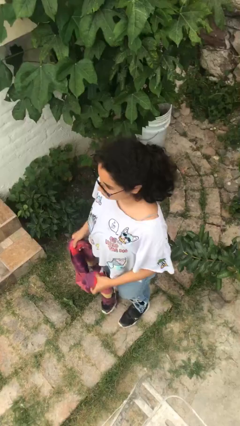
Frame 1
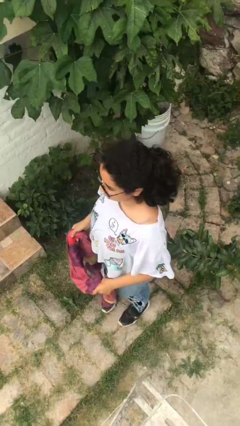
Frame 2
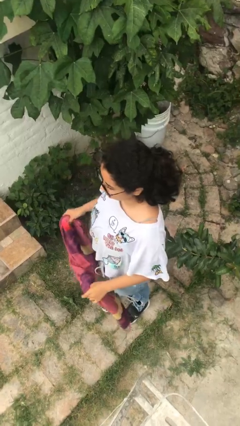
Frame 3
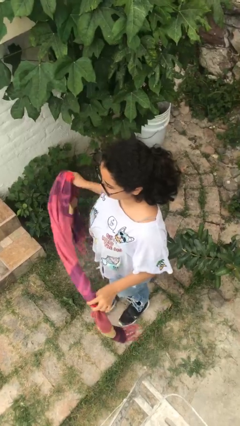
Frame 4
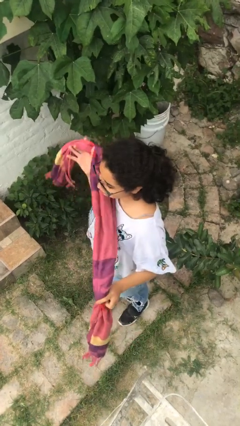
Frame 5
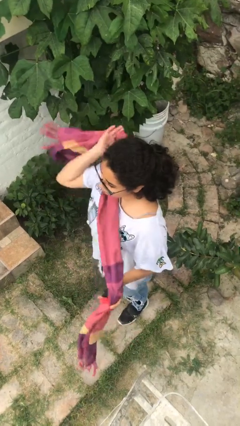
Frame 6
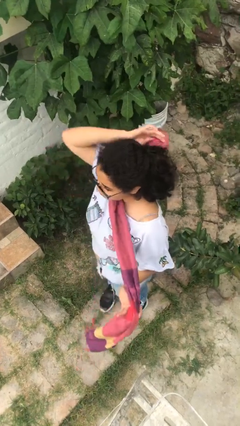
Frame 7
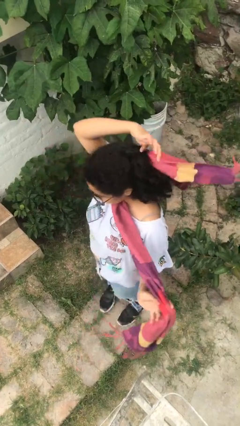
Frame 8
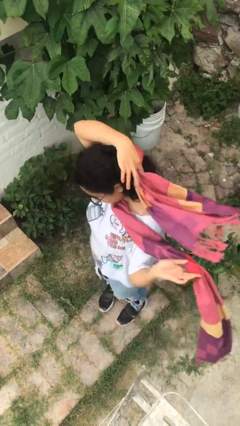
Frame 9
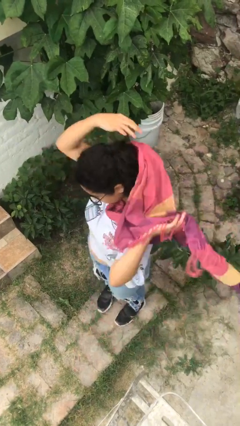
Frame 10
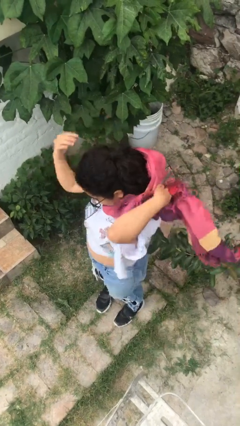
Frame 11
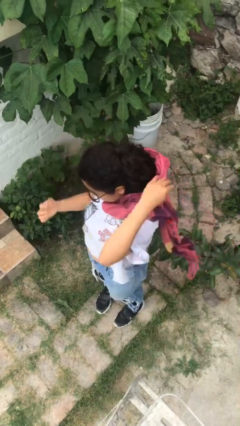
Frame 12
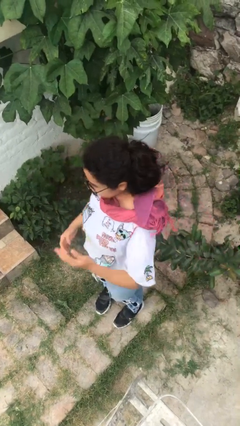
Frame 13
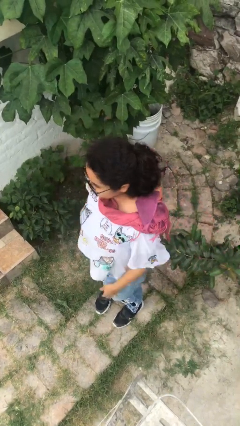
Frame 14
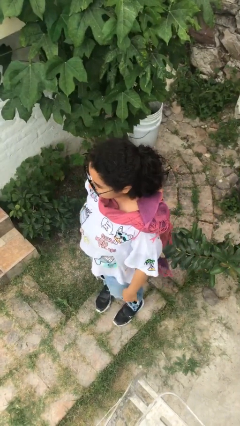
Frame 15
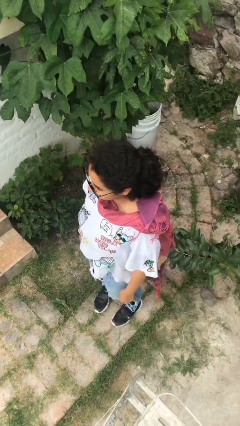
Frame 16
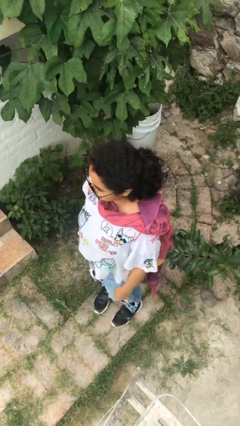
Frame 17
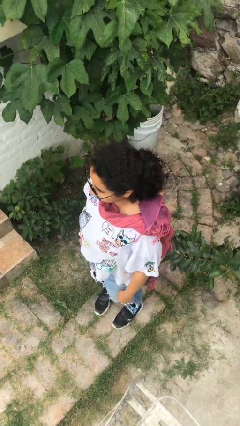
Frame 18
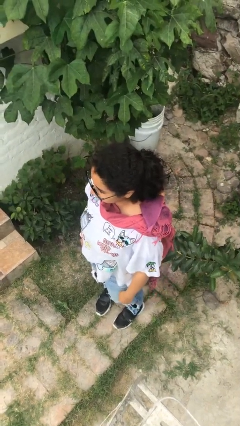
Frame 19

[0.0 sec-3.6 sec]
person puts on scarf

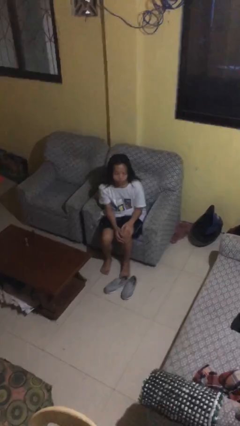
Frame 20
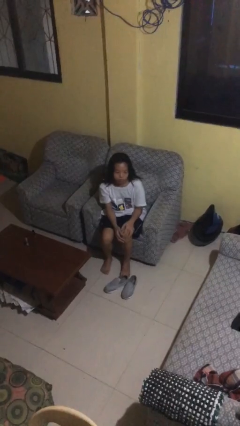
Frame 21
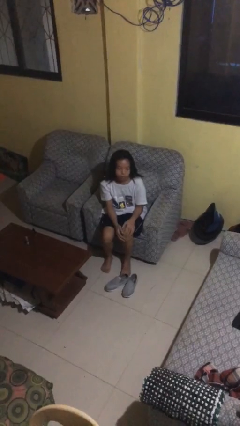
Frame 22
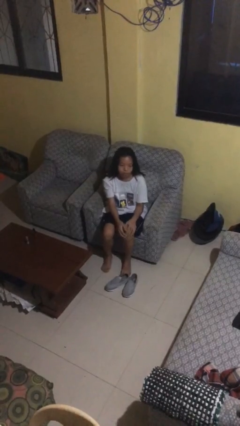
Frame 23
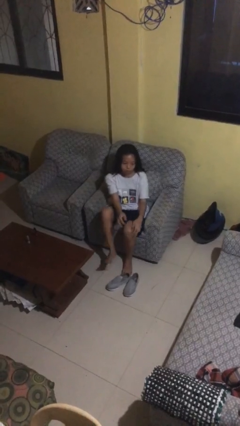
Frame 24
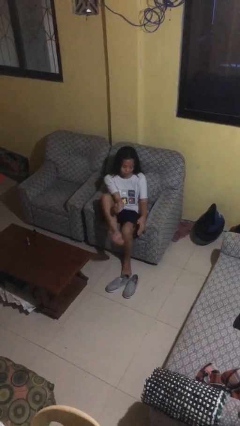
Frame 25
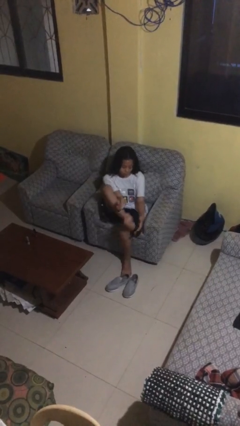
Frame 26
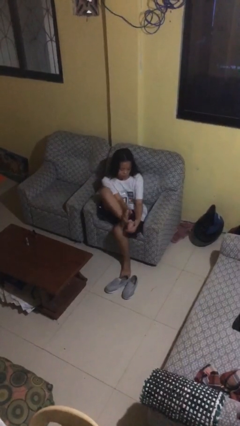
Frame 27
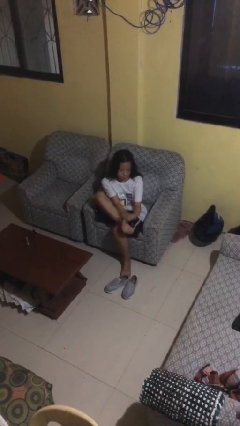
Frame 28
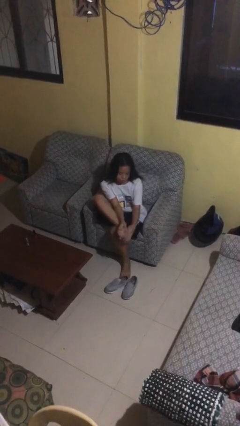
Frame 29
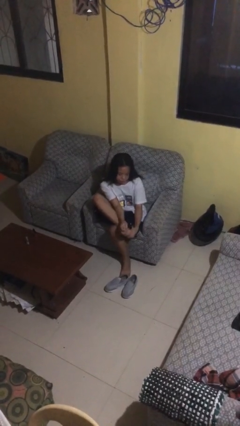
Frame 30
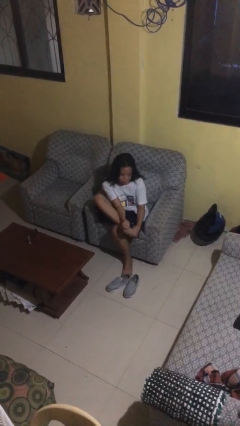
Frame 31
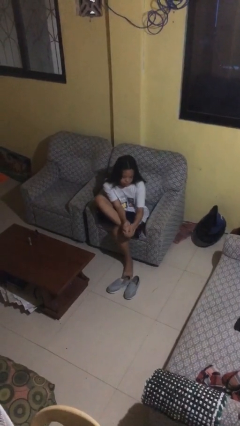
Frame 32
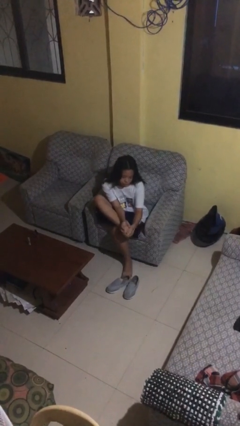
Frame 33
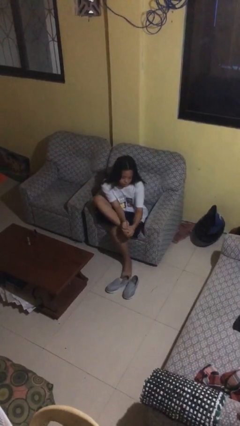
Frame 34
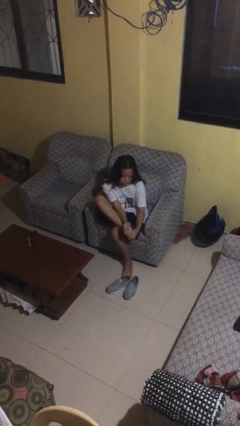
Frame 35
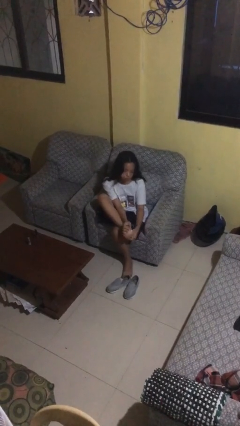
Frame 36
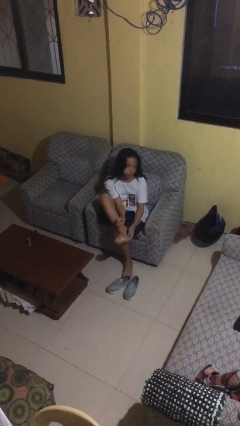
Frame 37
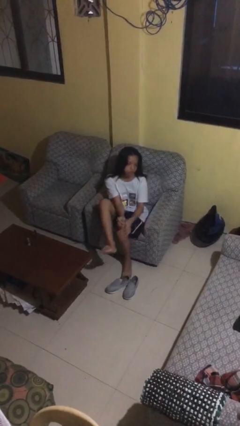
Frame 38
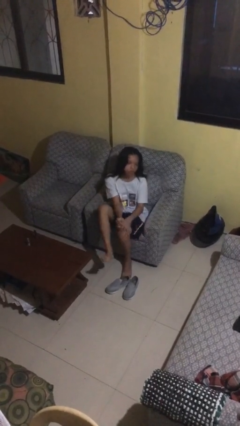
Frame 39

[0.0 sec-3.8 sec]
person rubs foot

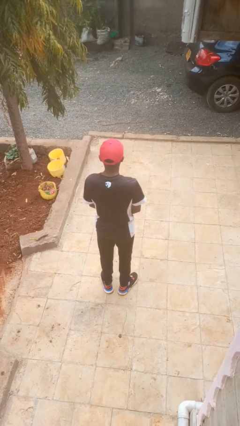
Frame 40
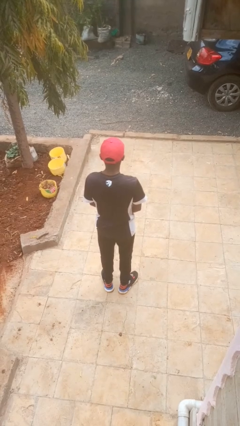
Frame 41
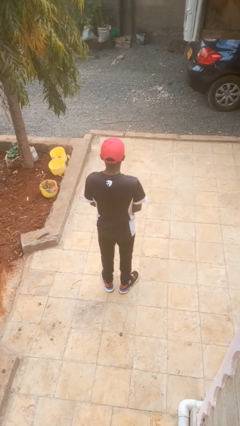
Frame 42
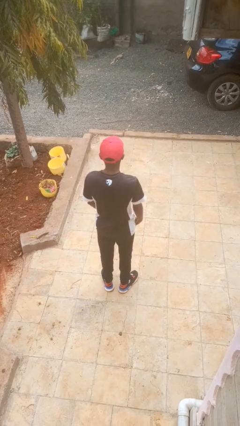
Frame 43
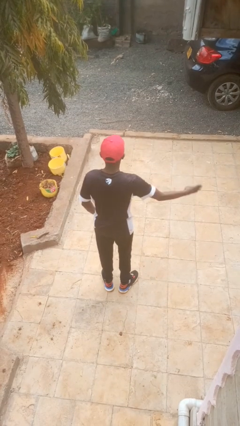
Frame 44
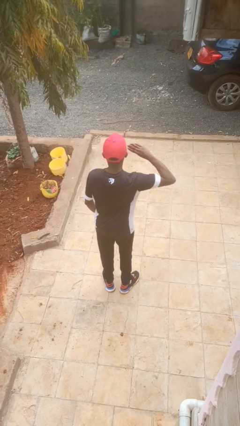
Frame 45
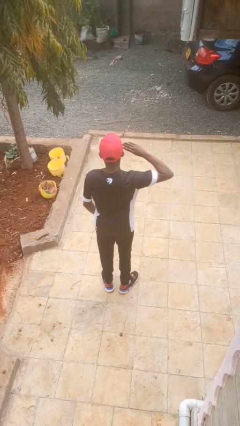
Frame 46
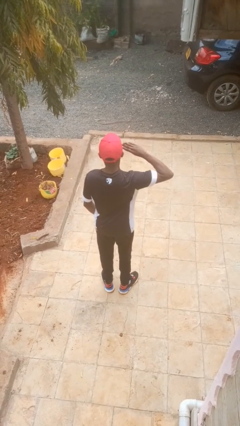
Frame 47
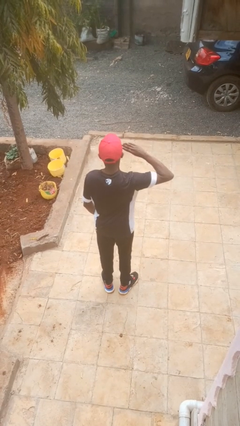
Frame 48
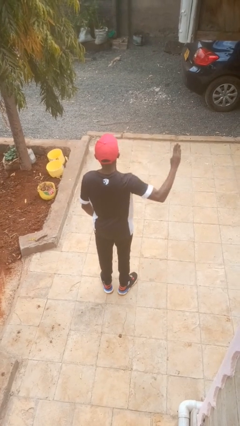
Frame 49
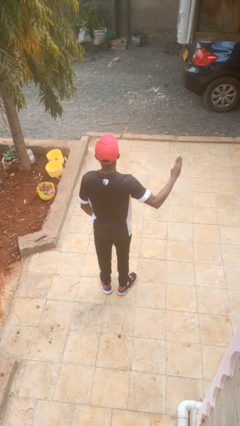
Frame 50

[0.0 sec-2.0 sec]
person salutes

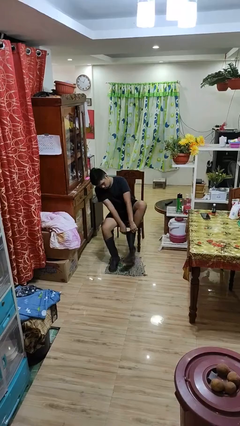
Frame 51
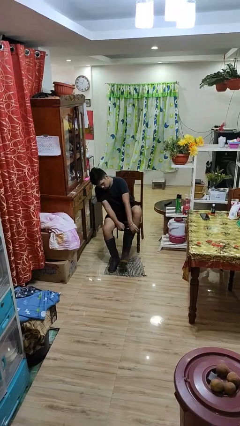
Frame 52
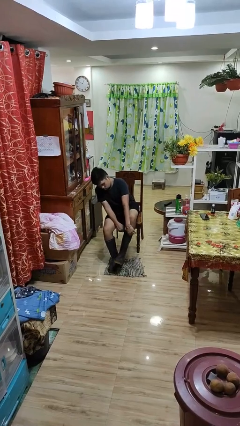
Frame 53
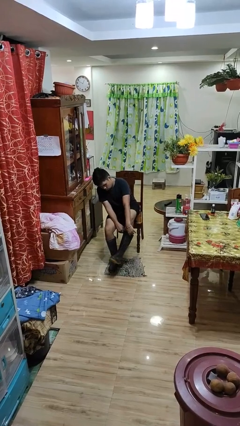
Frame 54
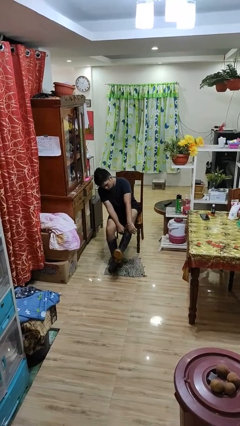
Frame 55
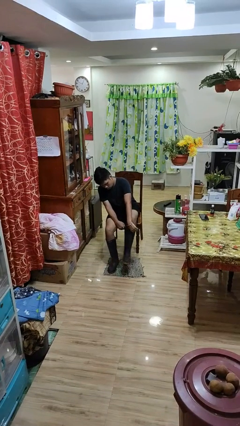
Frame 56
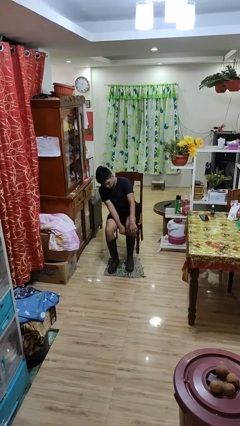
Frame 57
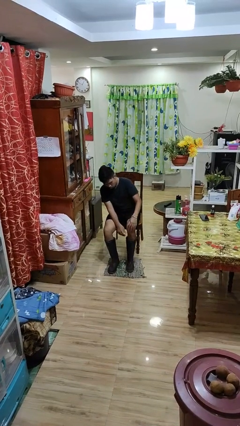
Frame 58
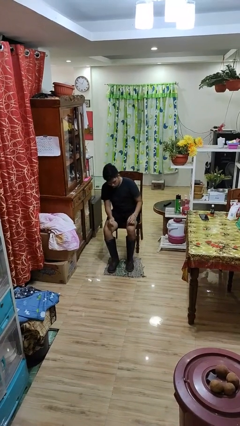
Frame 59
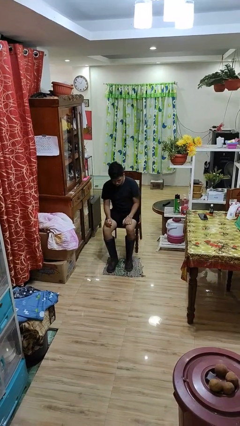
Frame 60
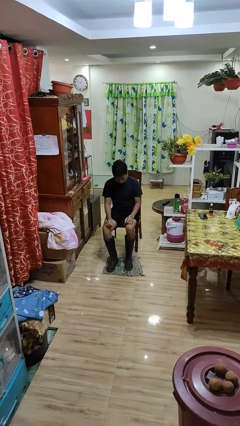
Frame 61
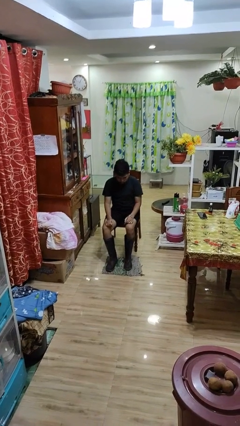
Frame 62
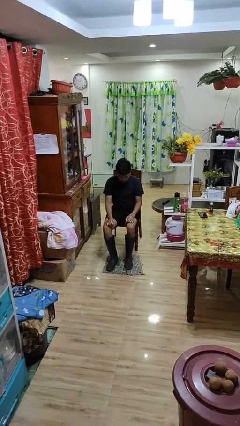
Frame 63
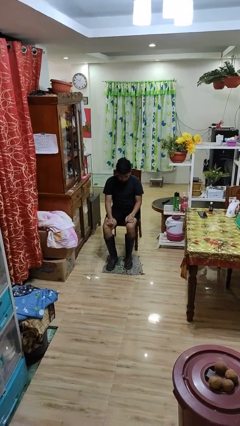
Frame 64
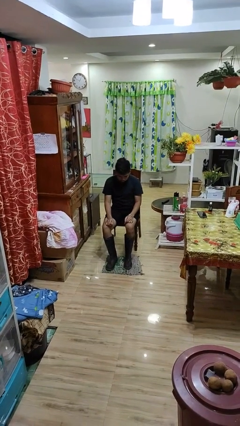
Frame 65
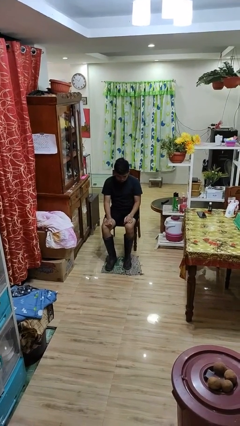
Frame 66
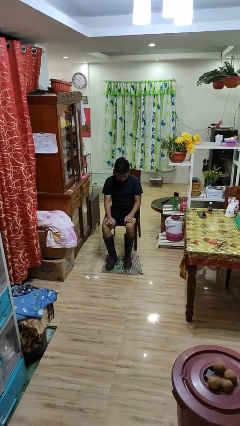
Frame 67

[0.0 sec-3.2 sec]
person uses television remote

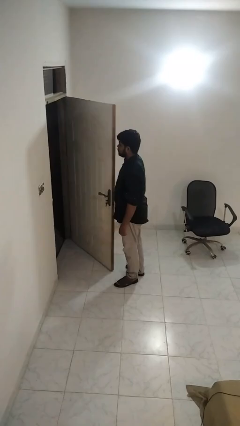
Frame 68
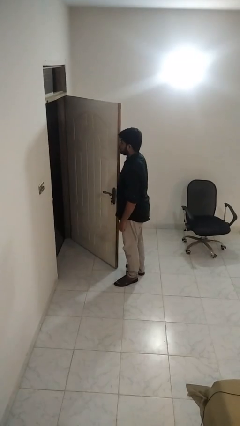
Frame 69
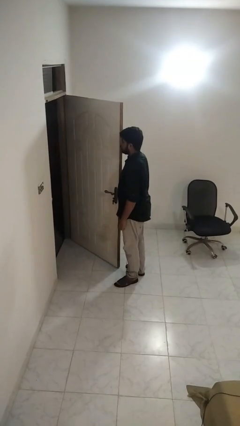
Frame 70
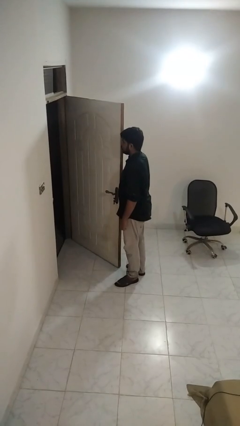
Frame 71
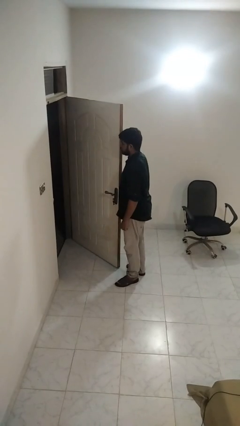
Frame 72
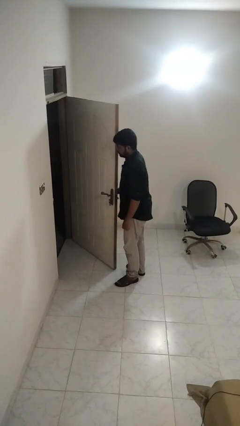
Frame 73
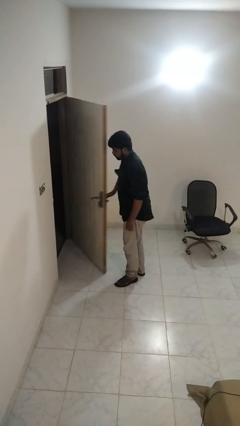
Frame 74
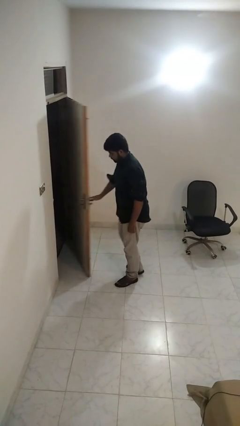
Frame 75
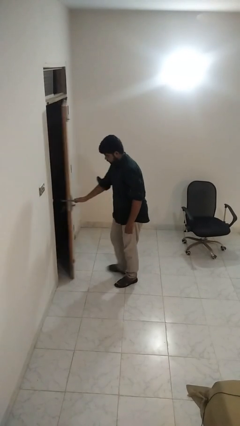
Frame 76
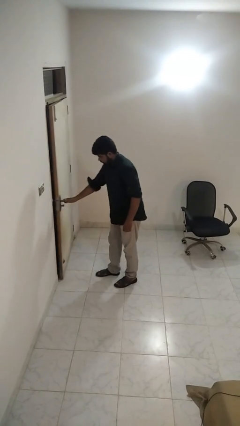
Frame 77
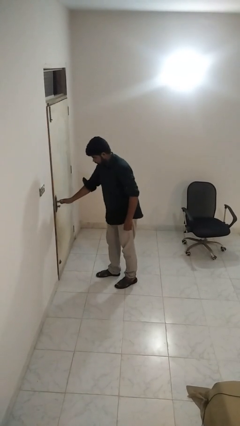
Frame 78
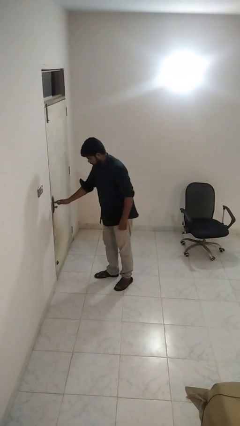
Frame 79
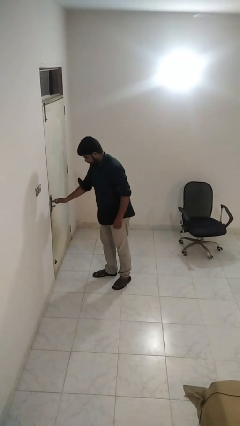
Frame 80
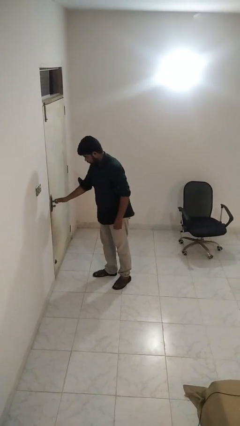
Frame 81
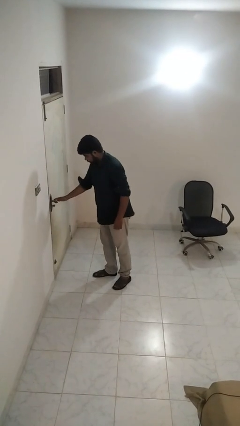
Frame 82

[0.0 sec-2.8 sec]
person closes facility door

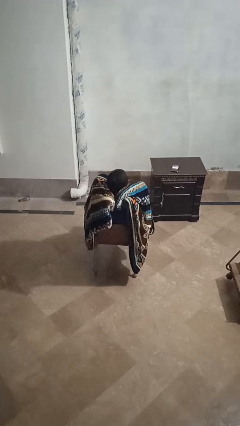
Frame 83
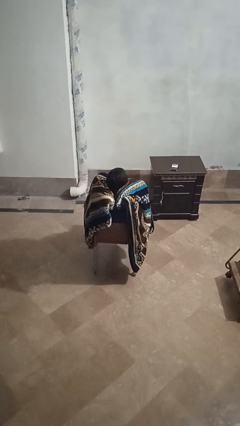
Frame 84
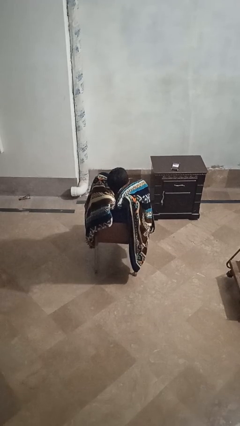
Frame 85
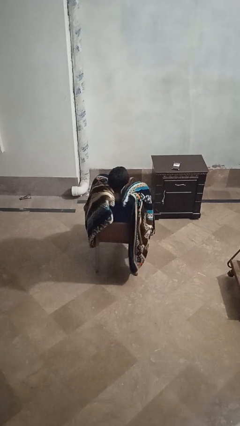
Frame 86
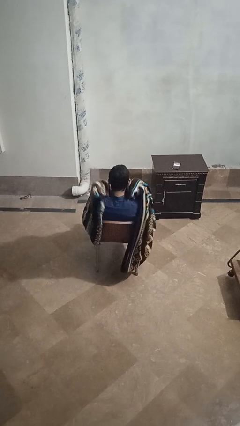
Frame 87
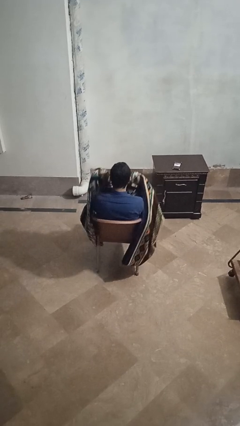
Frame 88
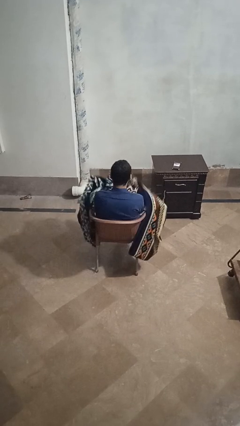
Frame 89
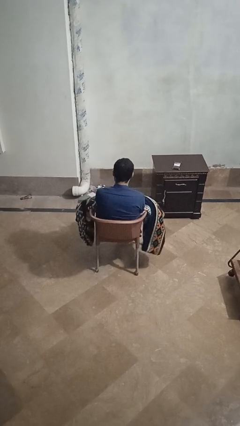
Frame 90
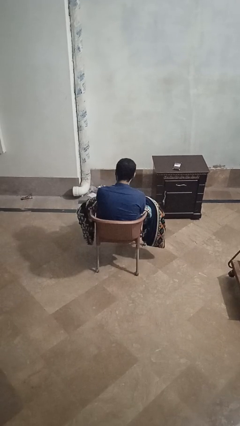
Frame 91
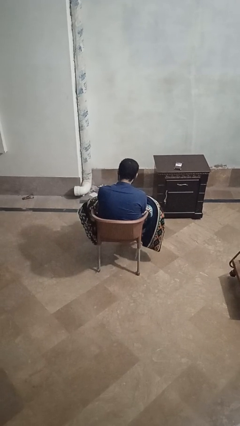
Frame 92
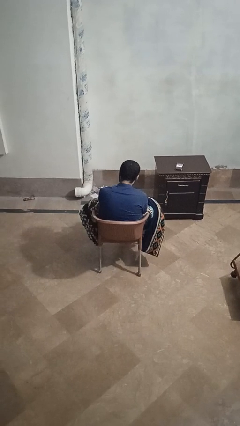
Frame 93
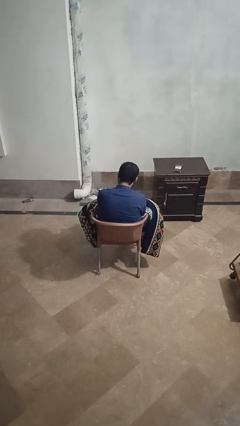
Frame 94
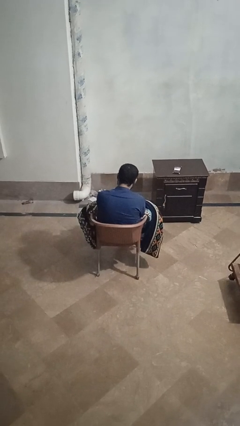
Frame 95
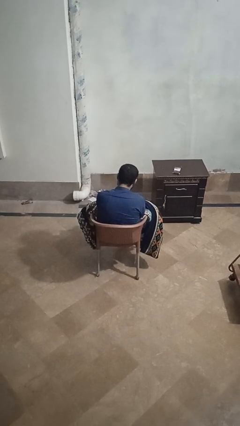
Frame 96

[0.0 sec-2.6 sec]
person uncovers with blanket
